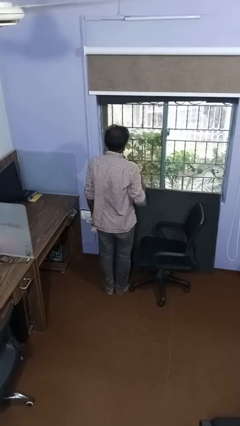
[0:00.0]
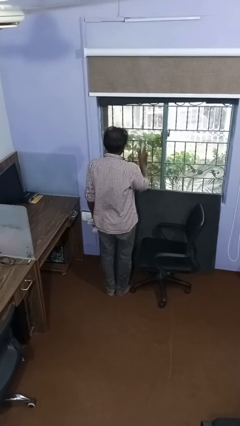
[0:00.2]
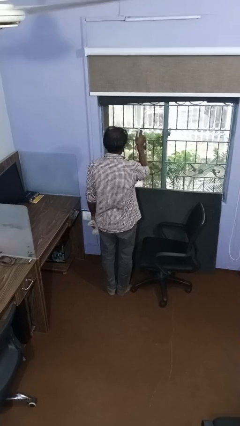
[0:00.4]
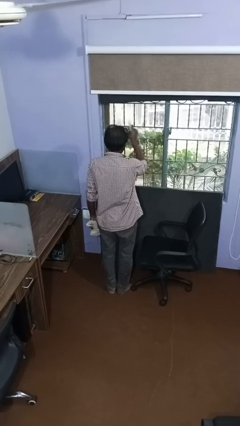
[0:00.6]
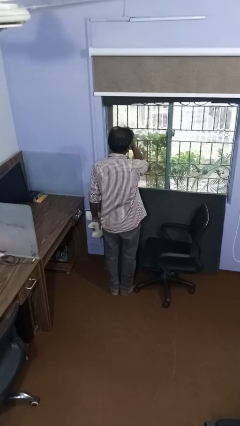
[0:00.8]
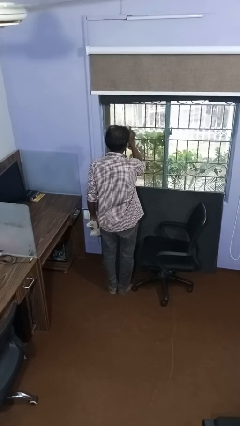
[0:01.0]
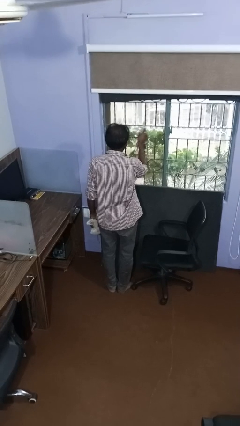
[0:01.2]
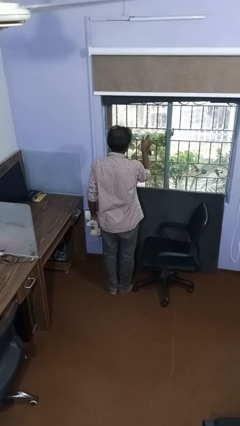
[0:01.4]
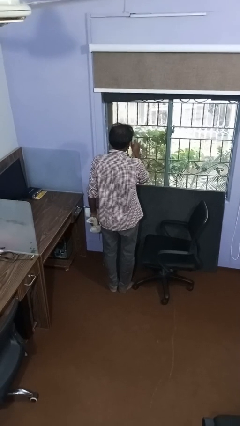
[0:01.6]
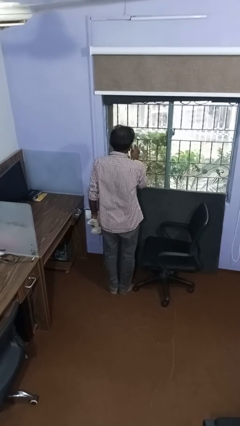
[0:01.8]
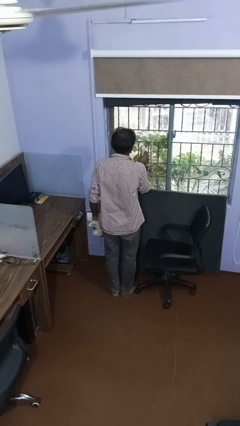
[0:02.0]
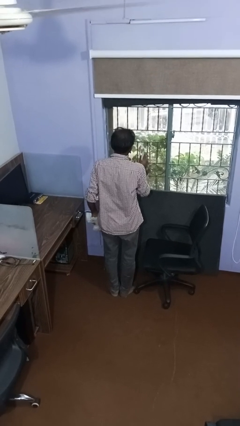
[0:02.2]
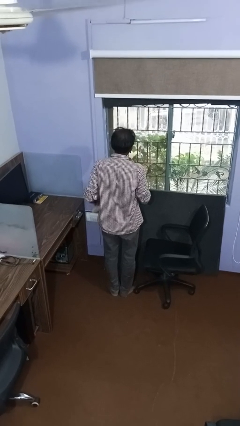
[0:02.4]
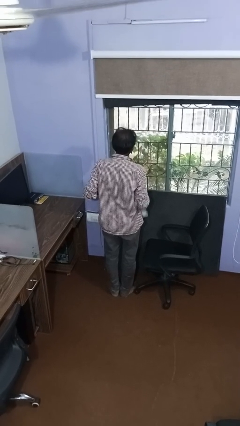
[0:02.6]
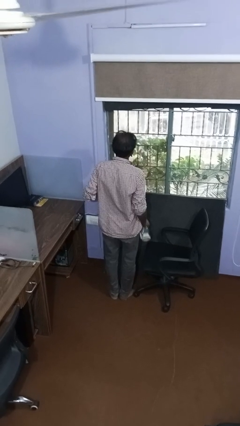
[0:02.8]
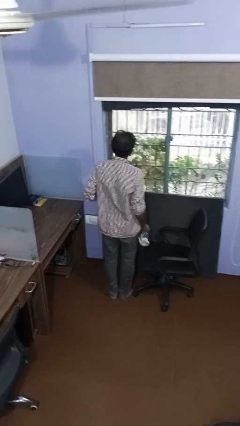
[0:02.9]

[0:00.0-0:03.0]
person sprays from bottle

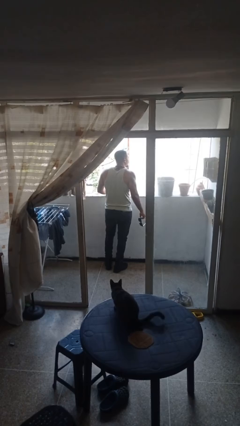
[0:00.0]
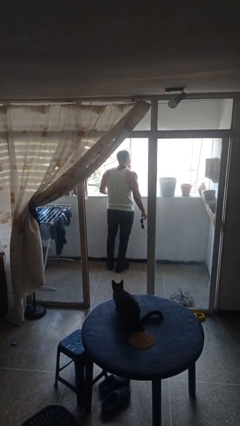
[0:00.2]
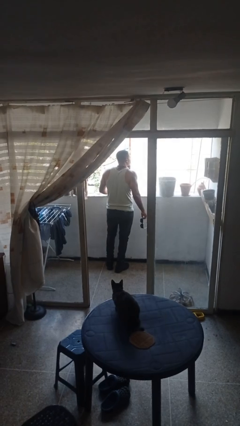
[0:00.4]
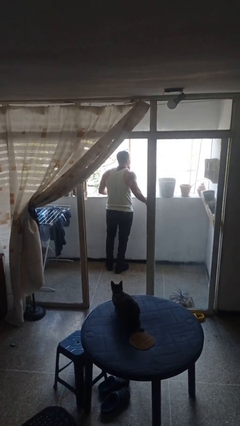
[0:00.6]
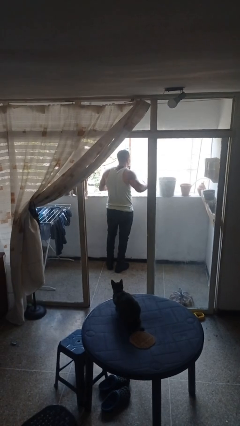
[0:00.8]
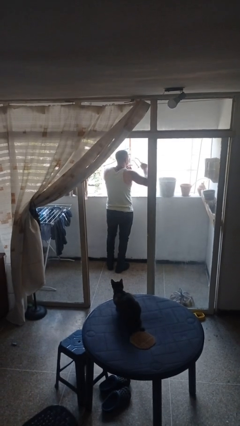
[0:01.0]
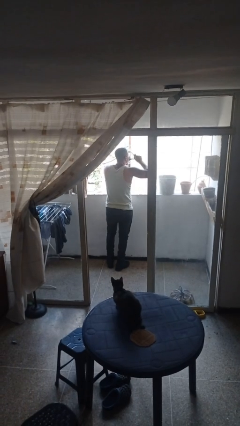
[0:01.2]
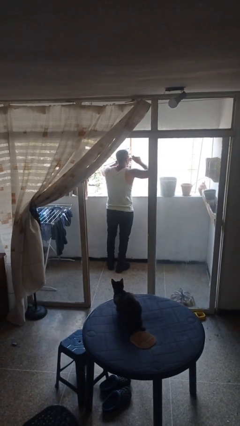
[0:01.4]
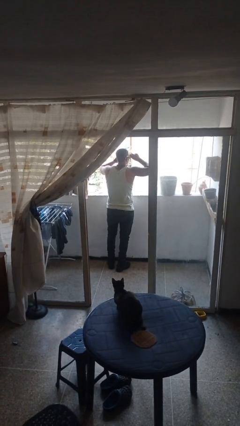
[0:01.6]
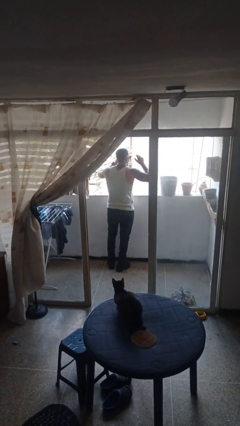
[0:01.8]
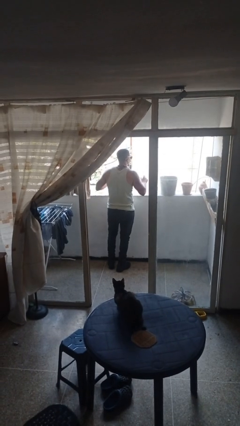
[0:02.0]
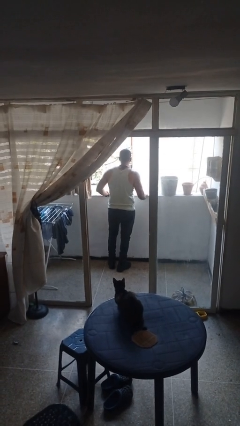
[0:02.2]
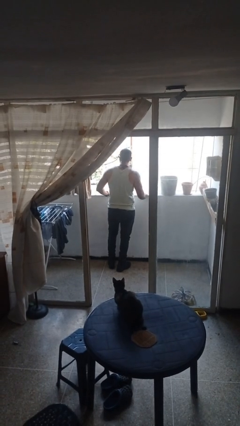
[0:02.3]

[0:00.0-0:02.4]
person puts on sunglasses

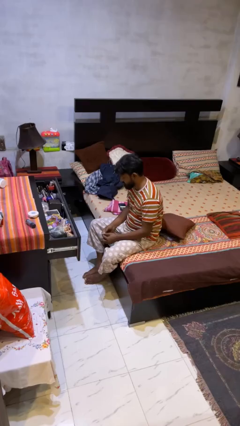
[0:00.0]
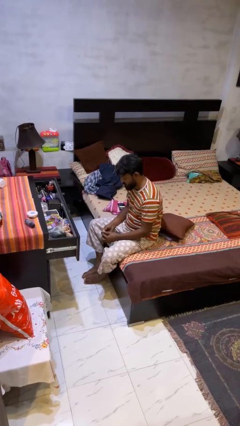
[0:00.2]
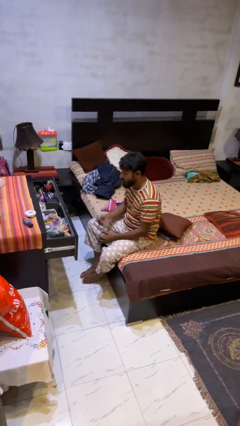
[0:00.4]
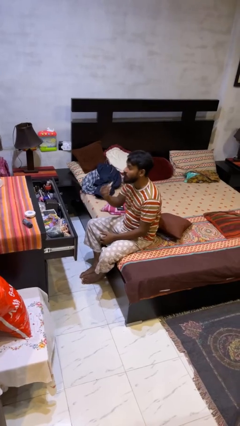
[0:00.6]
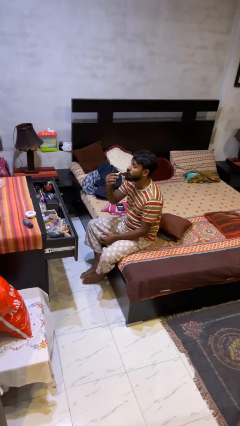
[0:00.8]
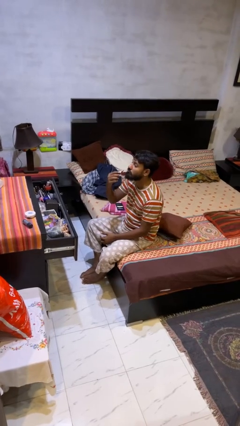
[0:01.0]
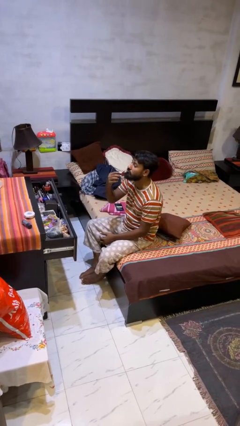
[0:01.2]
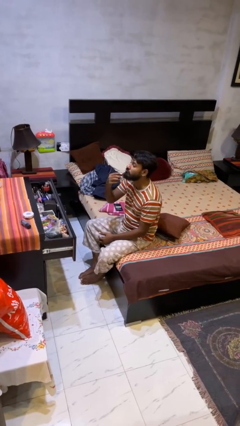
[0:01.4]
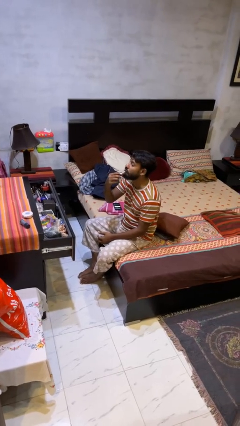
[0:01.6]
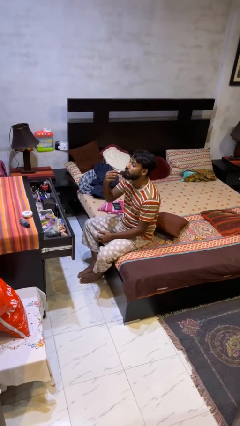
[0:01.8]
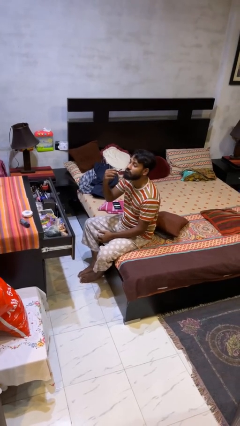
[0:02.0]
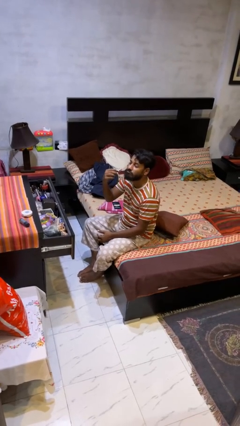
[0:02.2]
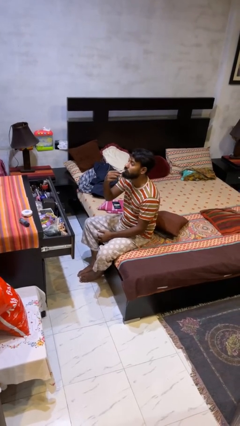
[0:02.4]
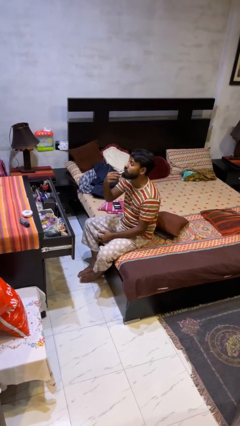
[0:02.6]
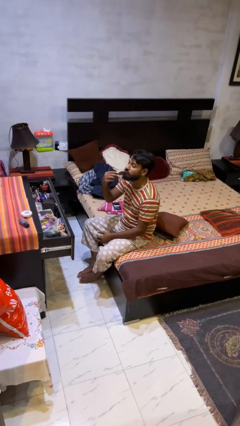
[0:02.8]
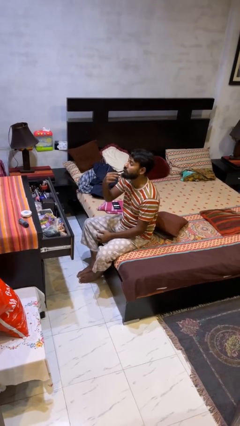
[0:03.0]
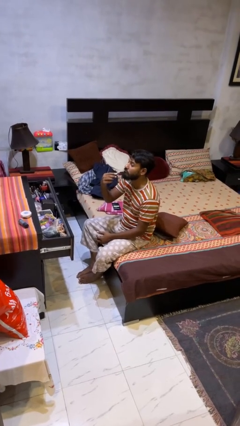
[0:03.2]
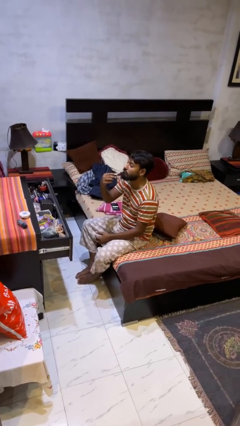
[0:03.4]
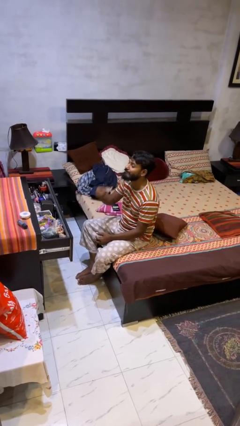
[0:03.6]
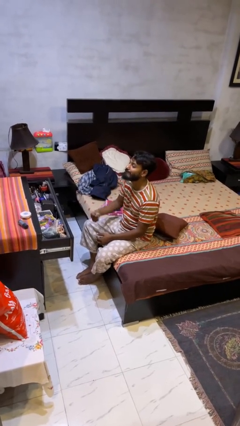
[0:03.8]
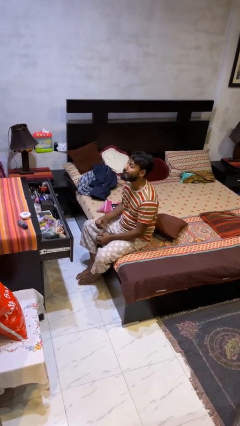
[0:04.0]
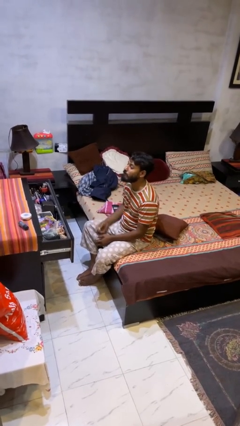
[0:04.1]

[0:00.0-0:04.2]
person applies lip makeup

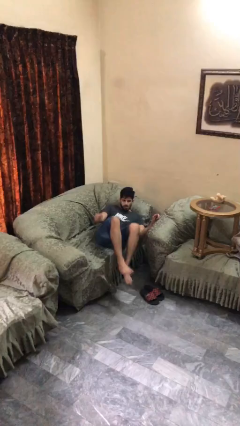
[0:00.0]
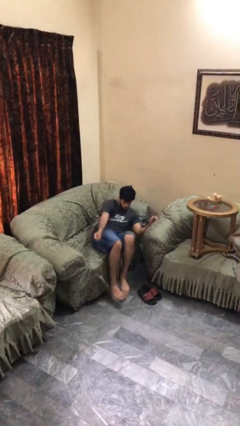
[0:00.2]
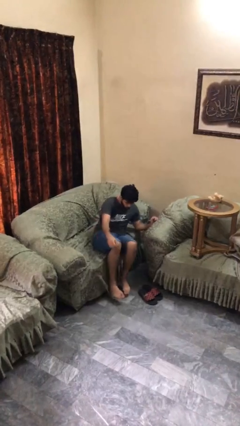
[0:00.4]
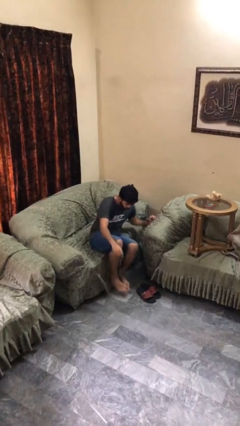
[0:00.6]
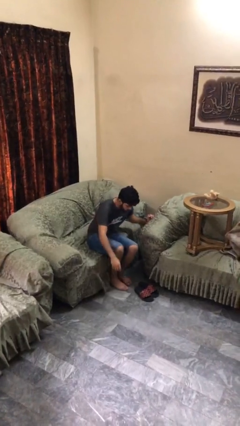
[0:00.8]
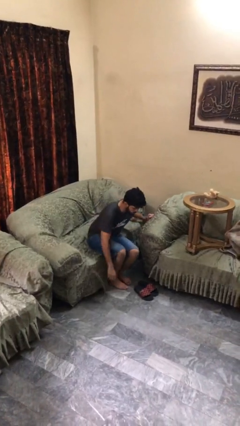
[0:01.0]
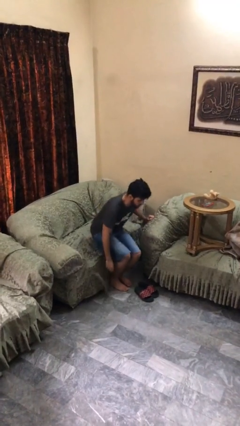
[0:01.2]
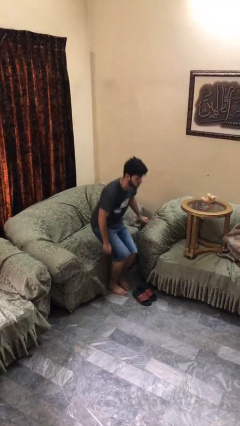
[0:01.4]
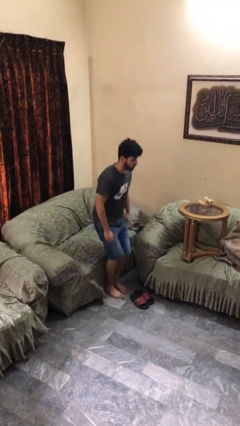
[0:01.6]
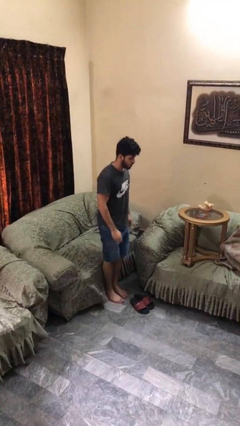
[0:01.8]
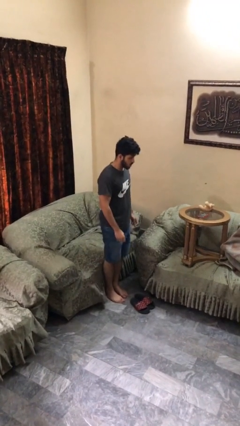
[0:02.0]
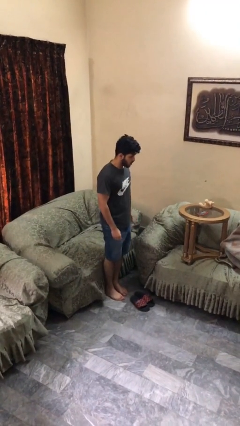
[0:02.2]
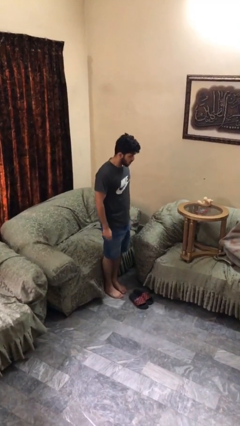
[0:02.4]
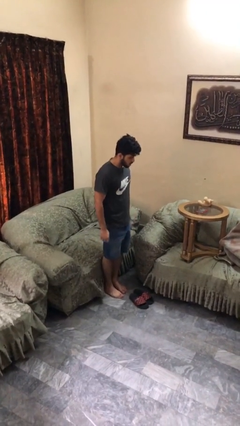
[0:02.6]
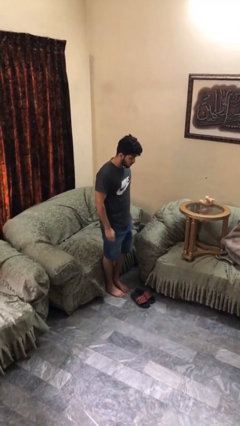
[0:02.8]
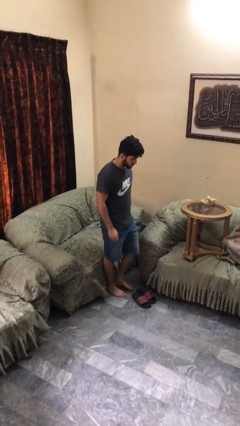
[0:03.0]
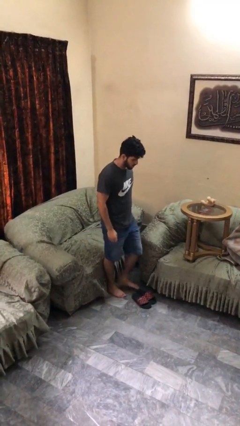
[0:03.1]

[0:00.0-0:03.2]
person stands up

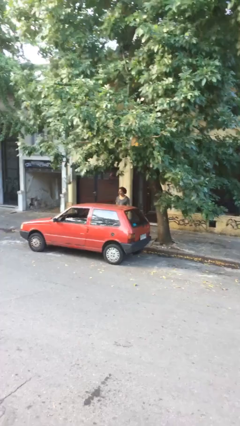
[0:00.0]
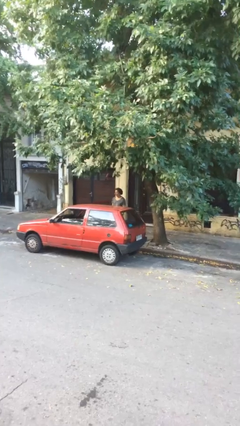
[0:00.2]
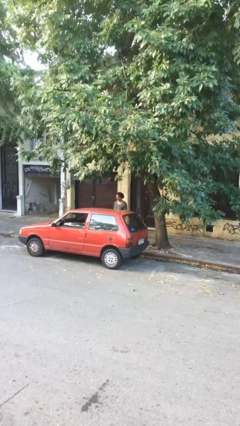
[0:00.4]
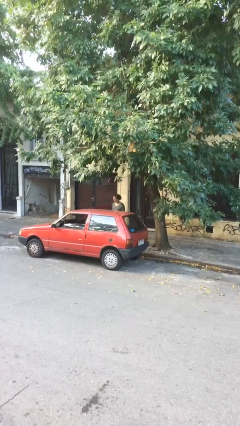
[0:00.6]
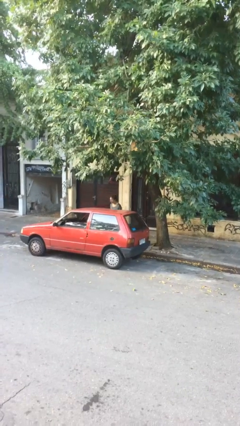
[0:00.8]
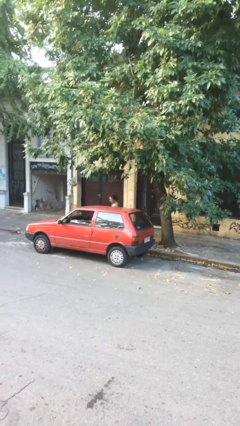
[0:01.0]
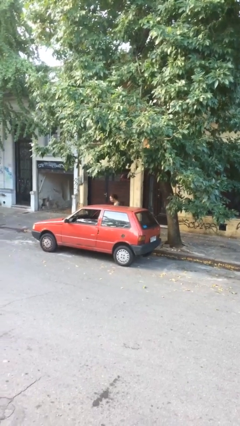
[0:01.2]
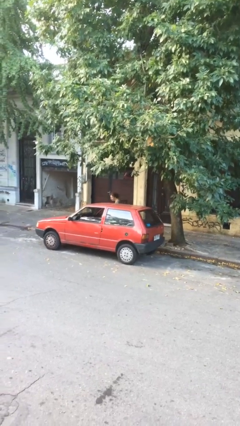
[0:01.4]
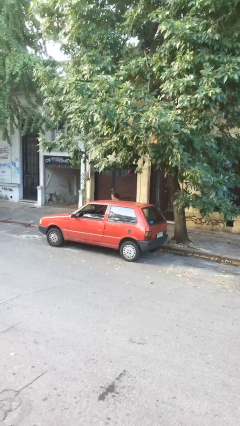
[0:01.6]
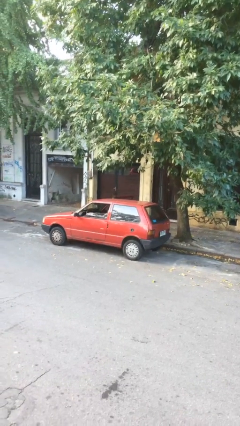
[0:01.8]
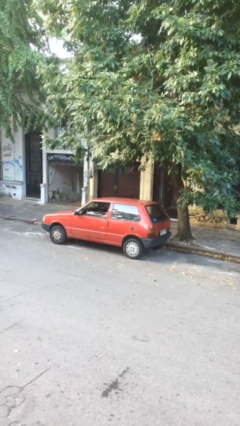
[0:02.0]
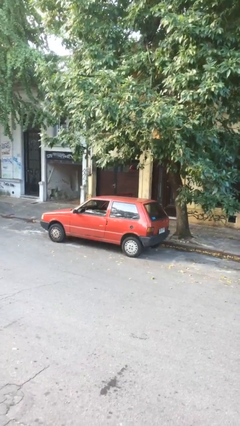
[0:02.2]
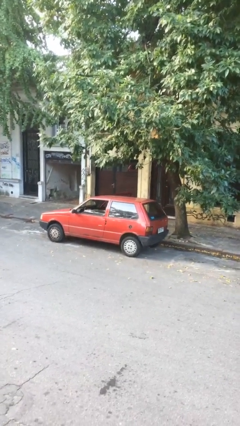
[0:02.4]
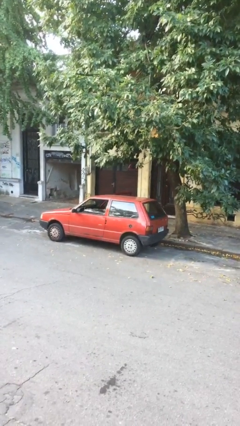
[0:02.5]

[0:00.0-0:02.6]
person enters car

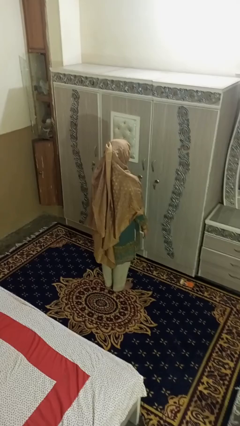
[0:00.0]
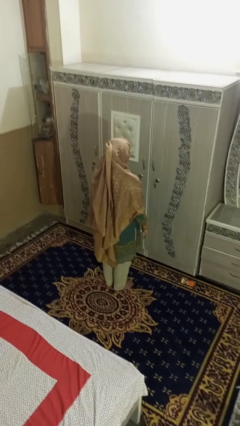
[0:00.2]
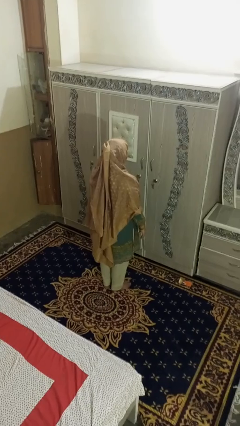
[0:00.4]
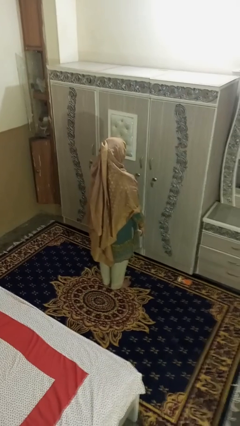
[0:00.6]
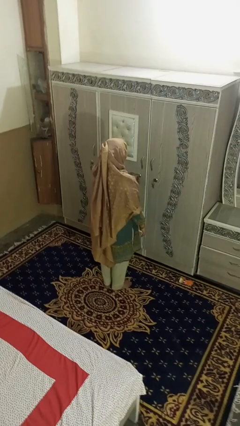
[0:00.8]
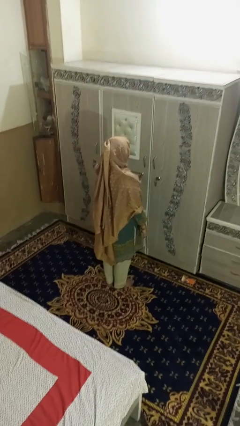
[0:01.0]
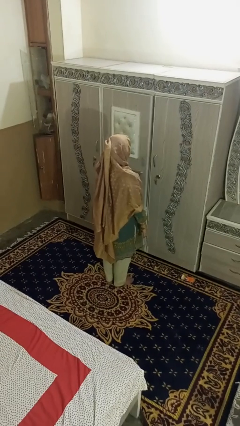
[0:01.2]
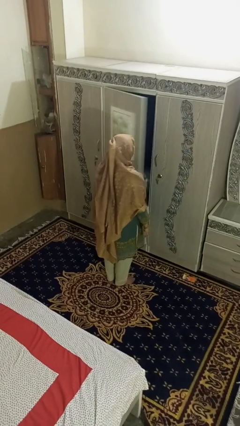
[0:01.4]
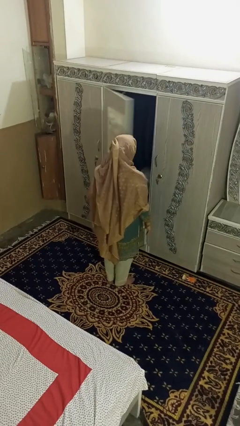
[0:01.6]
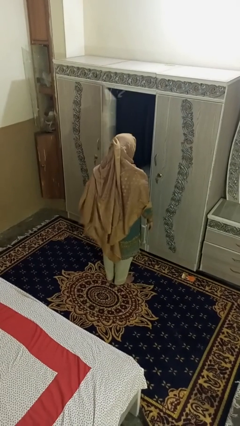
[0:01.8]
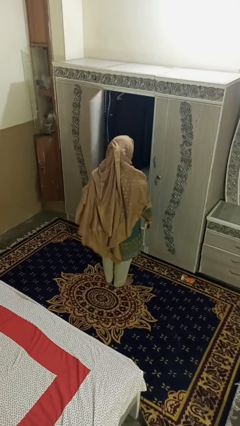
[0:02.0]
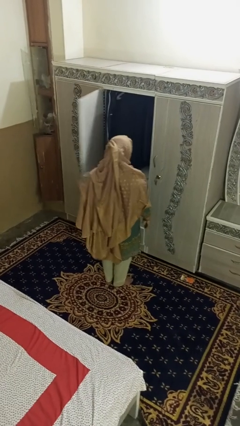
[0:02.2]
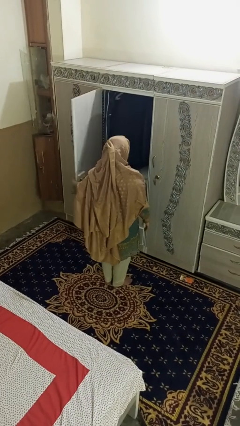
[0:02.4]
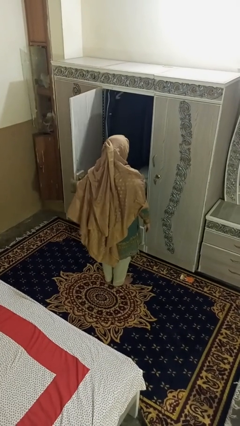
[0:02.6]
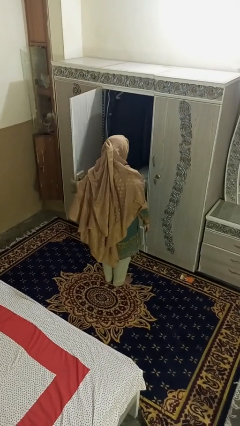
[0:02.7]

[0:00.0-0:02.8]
person opens dresser drawer
